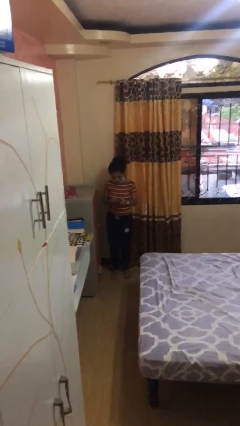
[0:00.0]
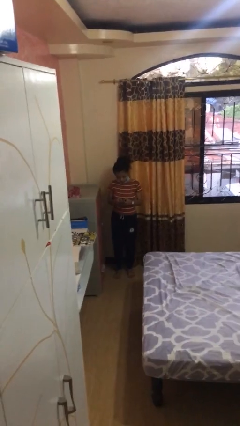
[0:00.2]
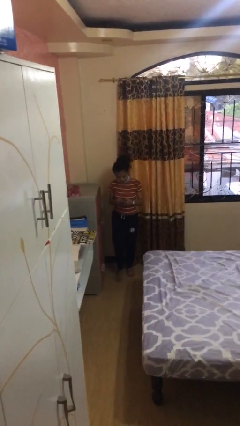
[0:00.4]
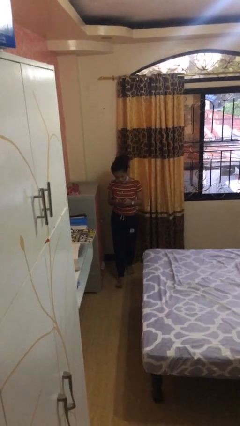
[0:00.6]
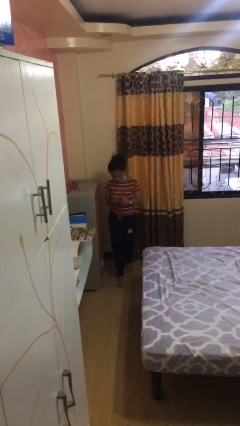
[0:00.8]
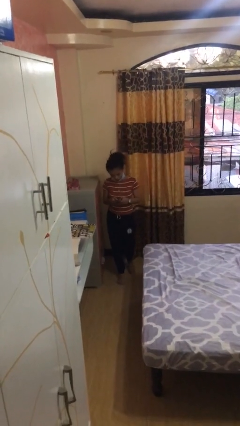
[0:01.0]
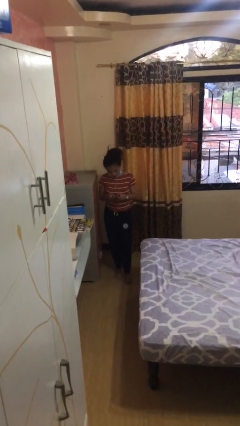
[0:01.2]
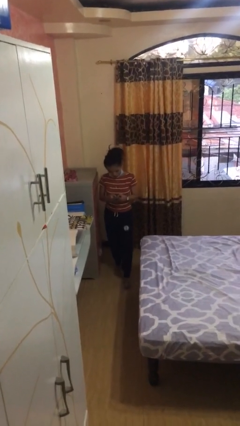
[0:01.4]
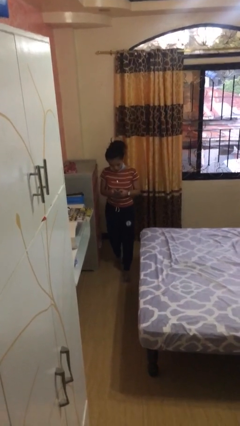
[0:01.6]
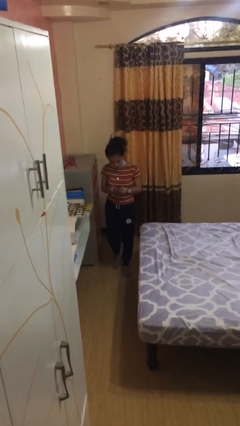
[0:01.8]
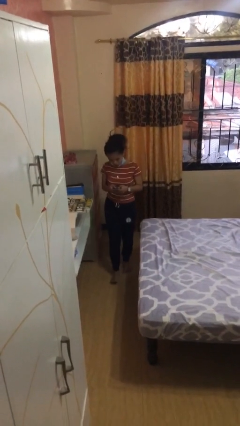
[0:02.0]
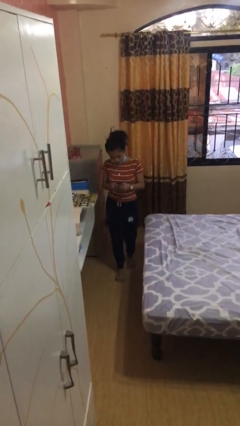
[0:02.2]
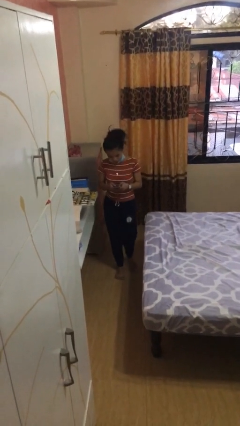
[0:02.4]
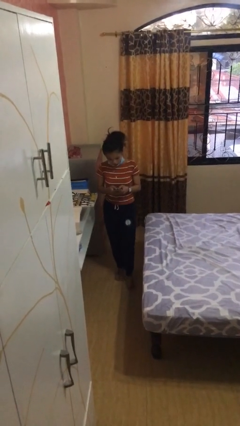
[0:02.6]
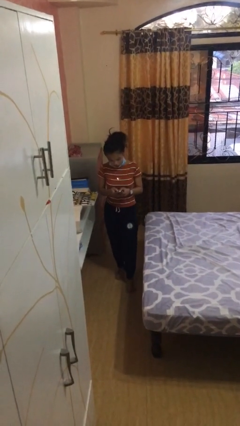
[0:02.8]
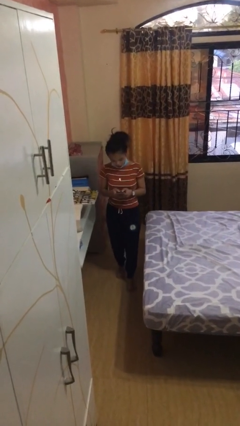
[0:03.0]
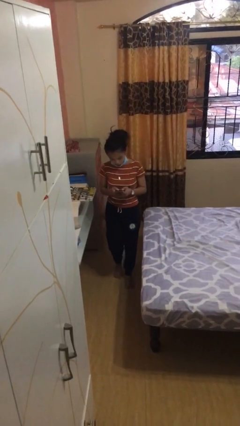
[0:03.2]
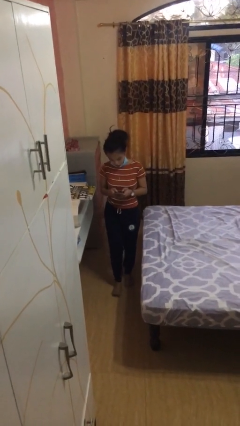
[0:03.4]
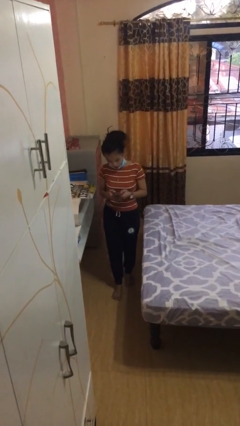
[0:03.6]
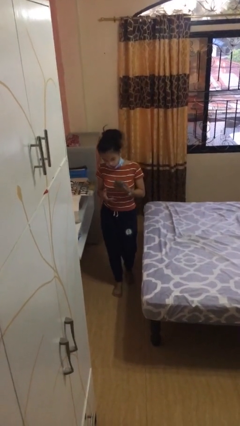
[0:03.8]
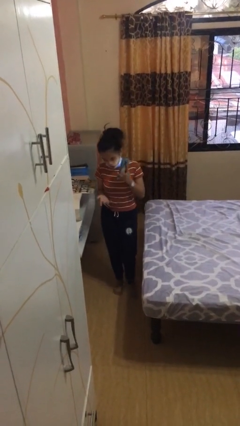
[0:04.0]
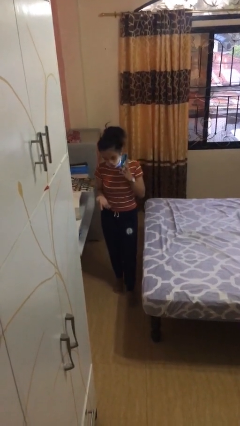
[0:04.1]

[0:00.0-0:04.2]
person texts on phone

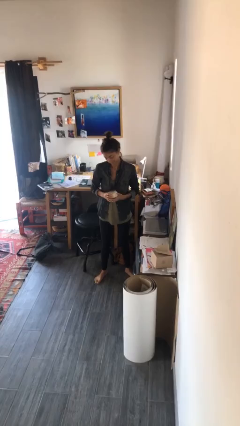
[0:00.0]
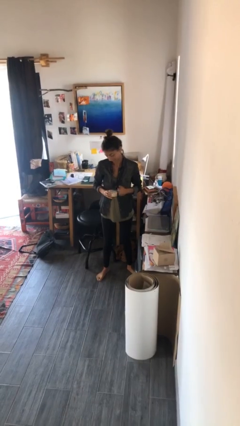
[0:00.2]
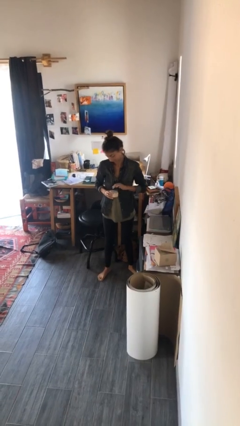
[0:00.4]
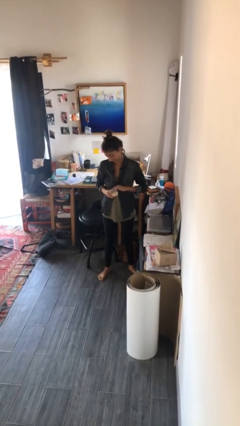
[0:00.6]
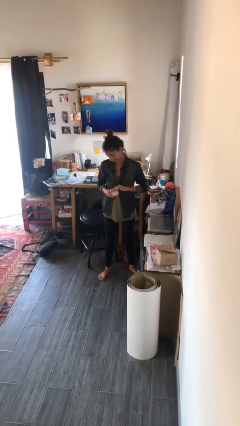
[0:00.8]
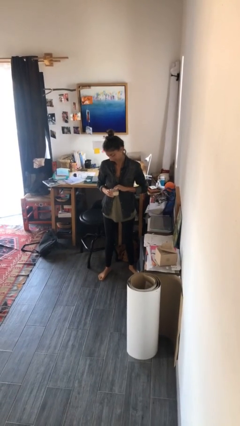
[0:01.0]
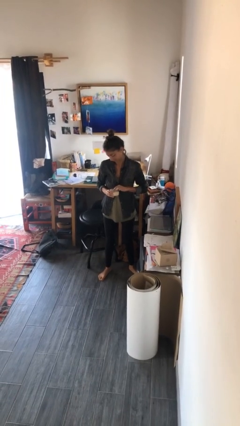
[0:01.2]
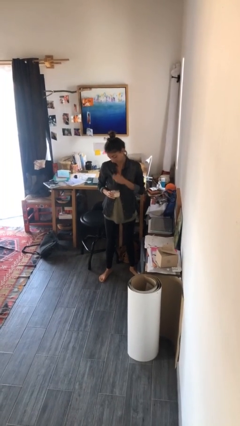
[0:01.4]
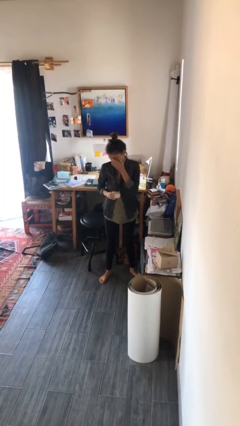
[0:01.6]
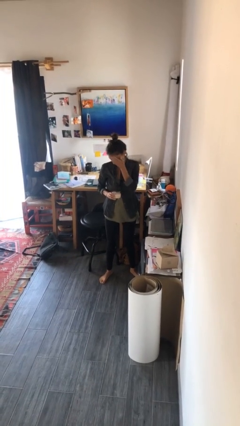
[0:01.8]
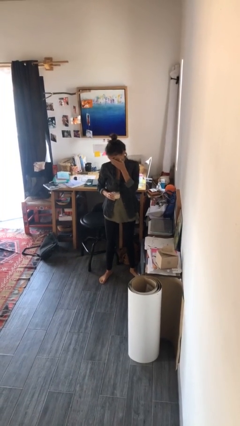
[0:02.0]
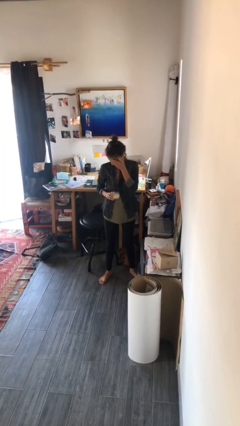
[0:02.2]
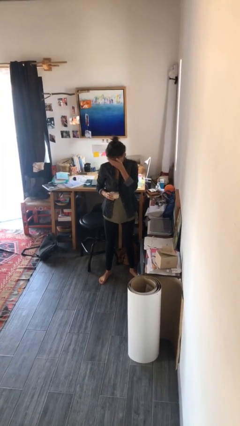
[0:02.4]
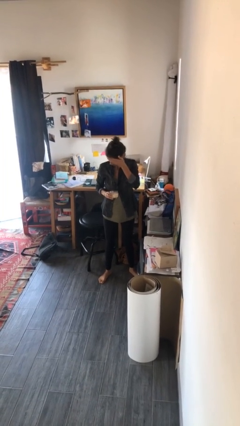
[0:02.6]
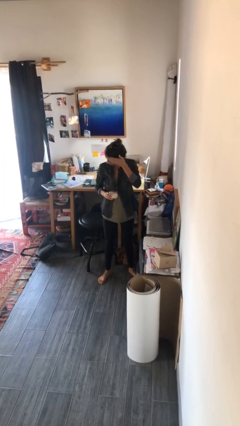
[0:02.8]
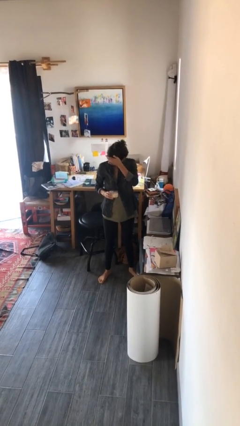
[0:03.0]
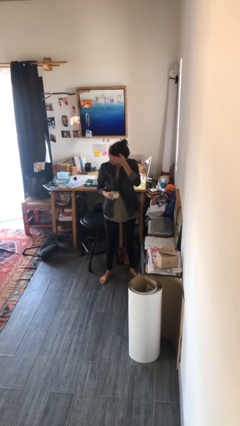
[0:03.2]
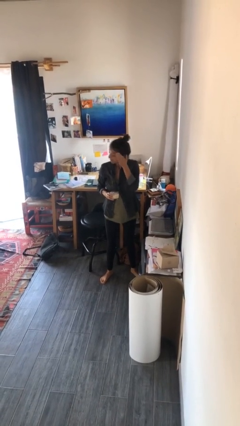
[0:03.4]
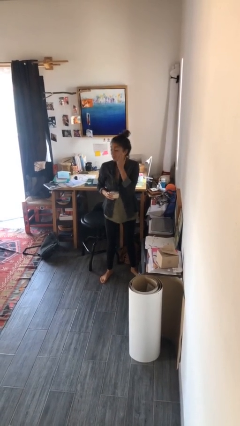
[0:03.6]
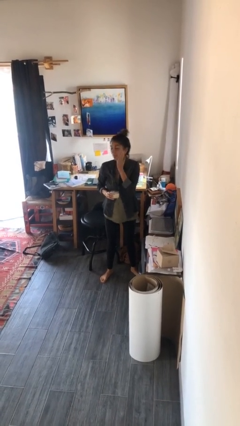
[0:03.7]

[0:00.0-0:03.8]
person applies facial moisturizer

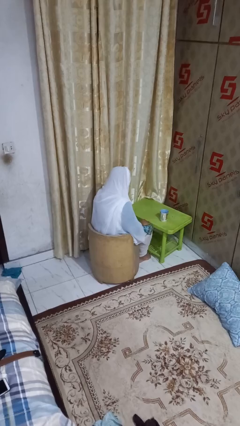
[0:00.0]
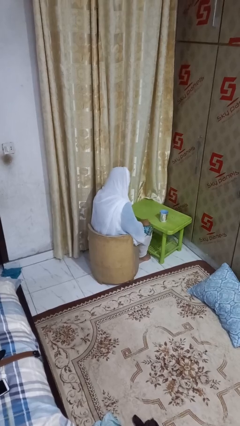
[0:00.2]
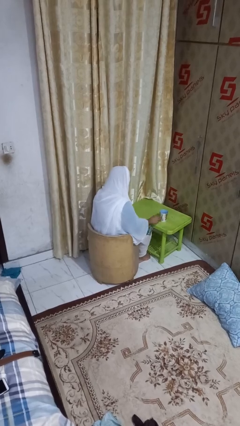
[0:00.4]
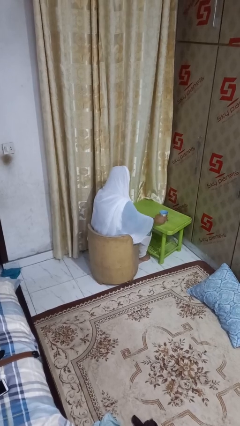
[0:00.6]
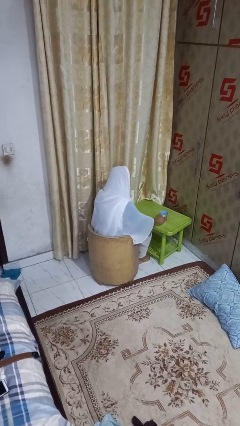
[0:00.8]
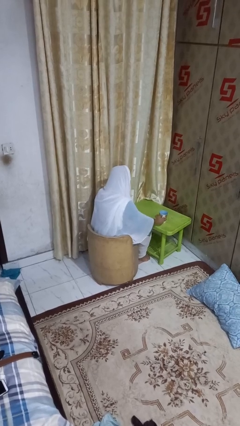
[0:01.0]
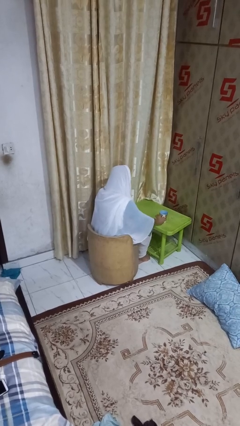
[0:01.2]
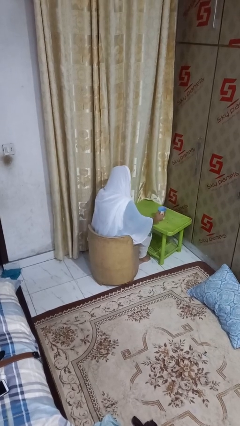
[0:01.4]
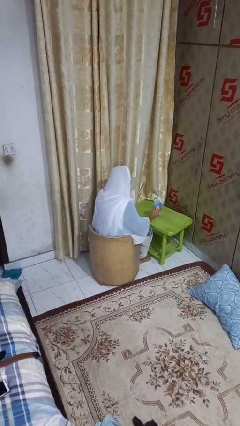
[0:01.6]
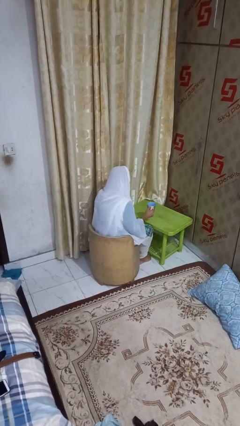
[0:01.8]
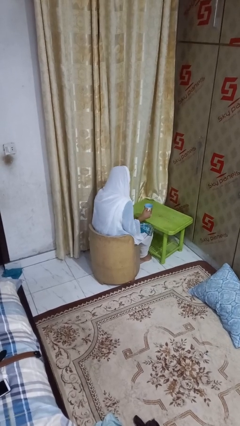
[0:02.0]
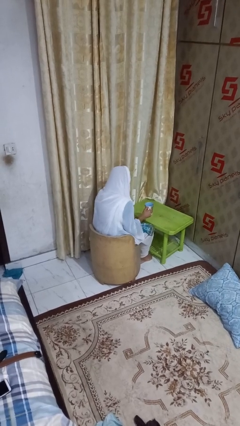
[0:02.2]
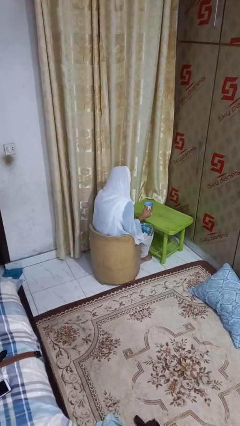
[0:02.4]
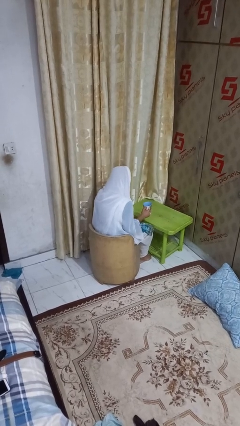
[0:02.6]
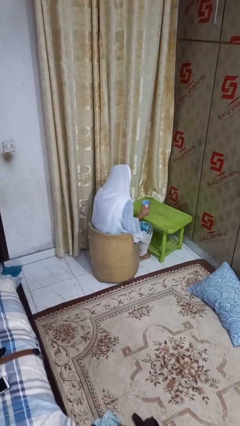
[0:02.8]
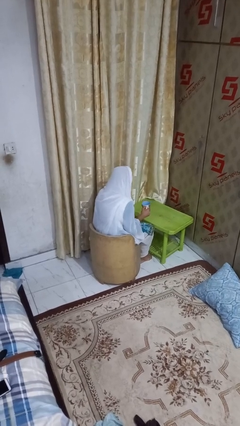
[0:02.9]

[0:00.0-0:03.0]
person picks up object from table

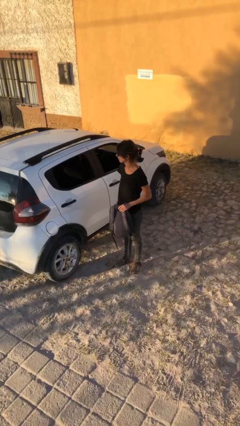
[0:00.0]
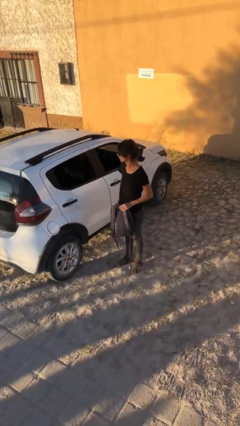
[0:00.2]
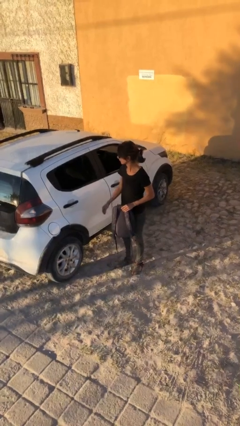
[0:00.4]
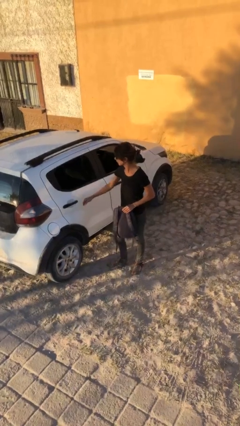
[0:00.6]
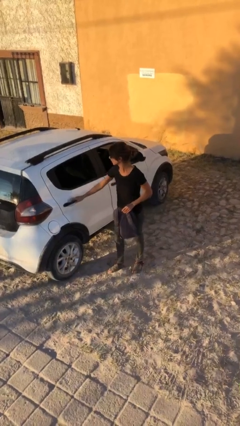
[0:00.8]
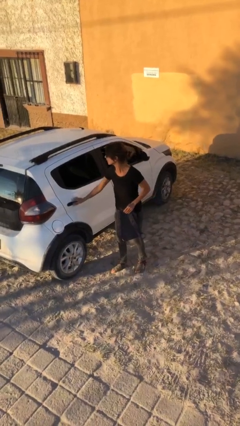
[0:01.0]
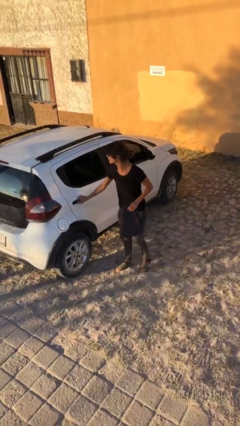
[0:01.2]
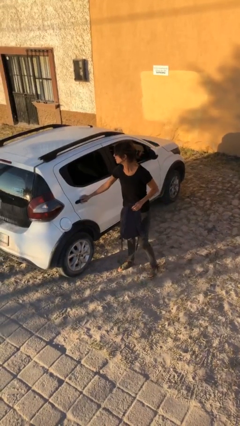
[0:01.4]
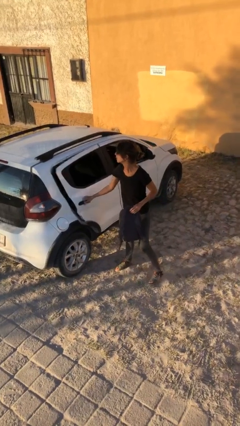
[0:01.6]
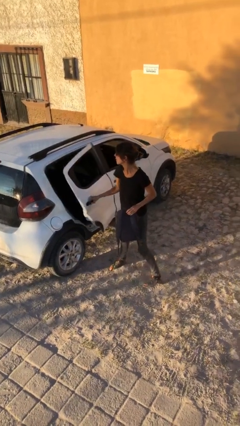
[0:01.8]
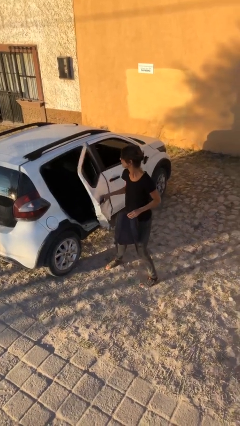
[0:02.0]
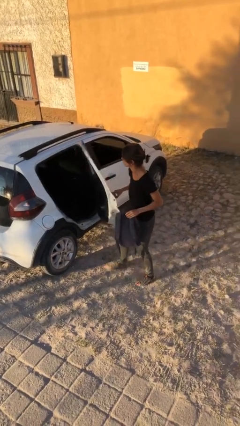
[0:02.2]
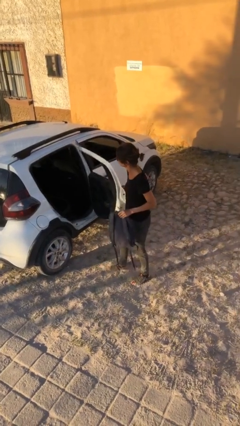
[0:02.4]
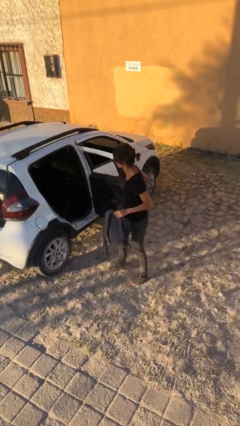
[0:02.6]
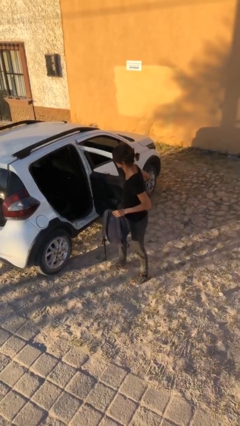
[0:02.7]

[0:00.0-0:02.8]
person opens car door

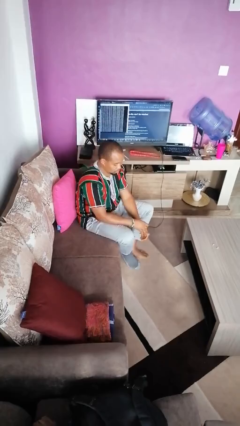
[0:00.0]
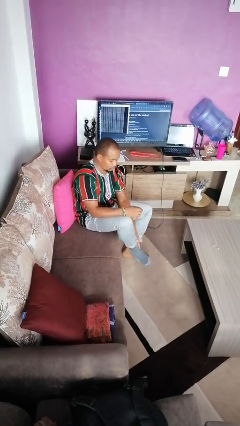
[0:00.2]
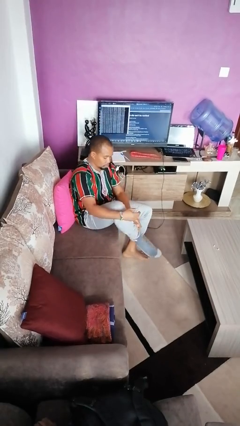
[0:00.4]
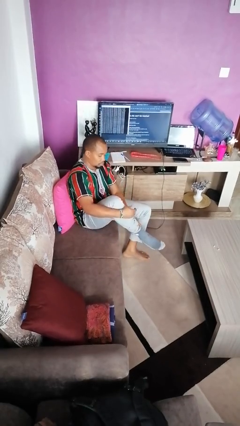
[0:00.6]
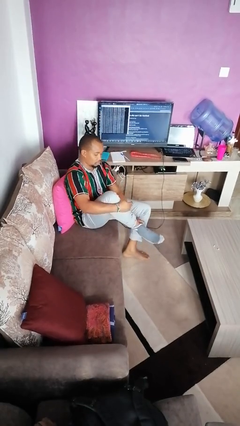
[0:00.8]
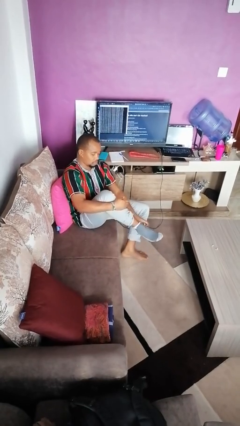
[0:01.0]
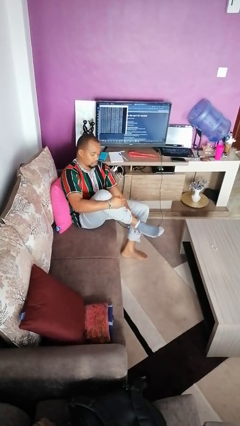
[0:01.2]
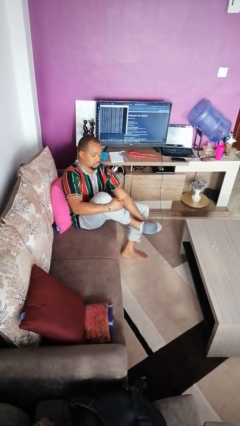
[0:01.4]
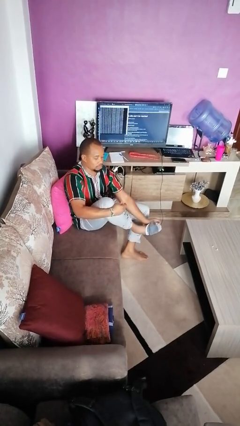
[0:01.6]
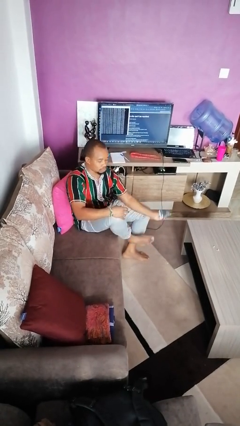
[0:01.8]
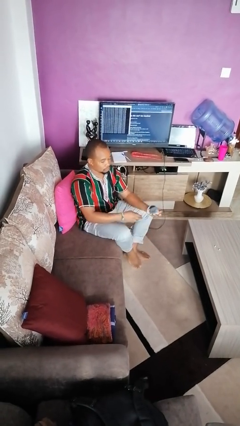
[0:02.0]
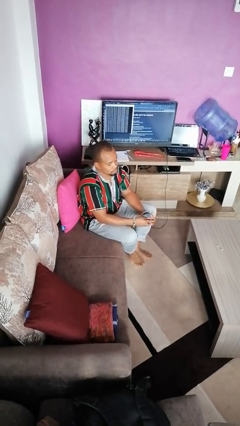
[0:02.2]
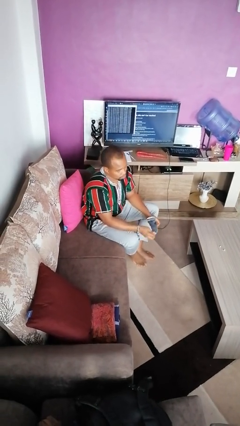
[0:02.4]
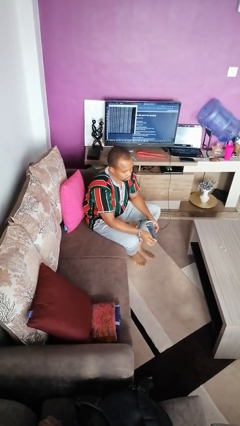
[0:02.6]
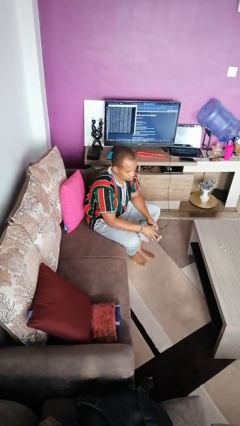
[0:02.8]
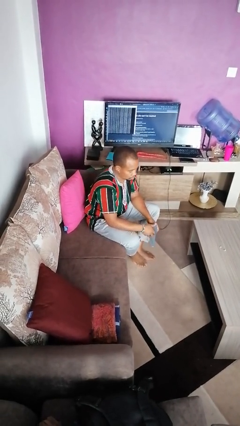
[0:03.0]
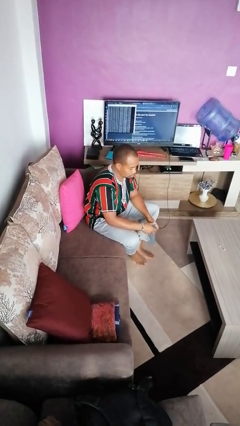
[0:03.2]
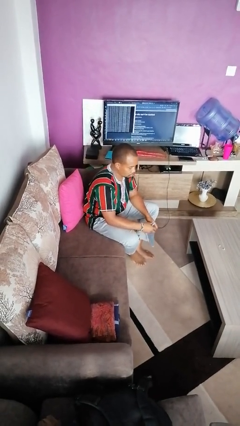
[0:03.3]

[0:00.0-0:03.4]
person takes off socks

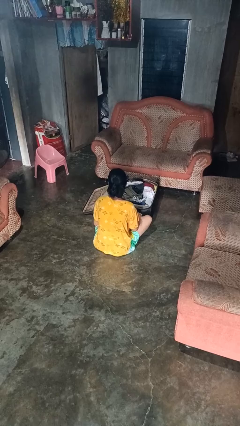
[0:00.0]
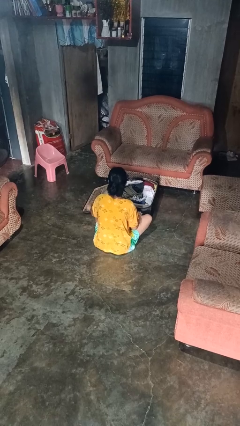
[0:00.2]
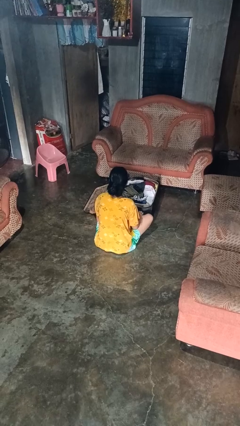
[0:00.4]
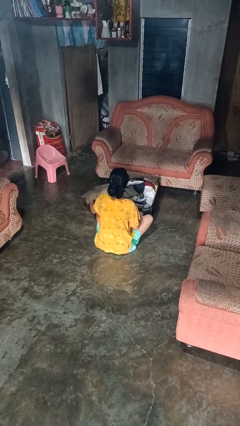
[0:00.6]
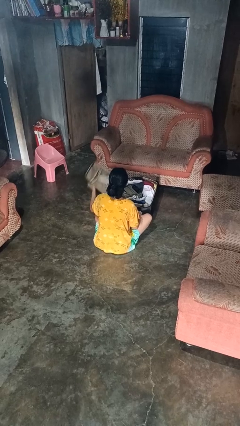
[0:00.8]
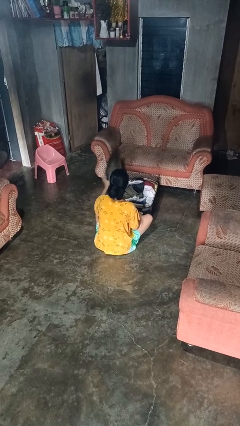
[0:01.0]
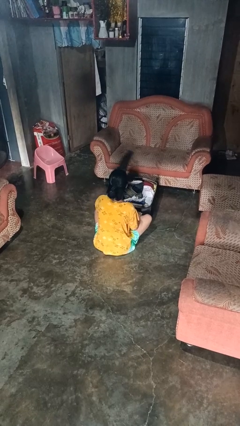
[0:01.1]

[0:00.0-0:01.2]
person closes suitcase
